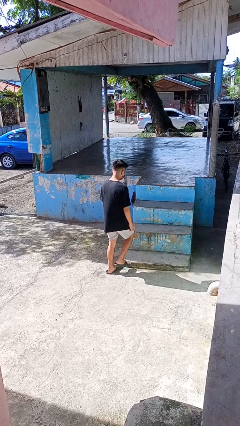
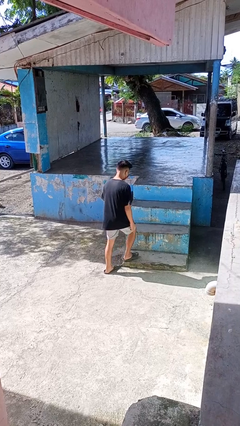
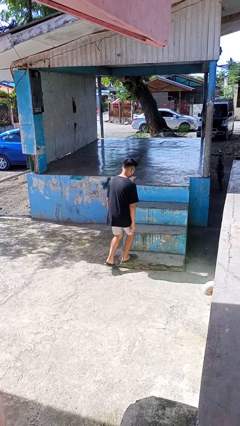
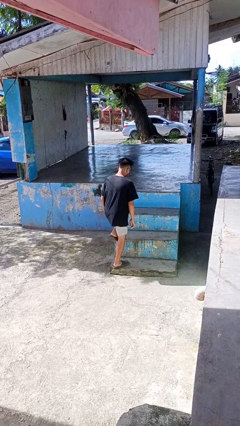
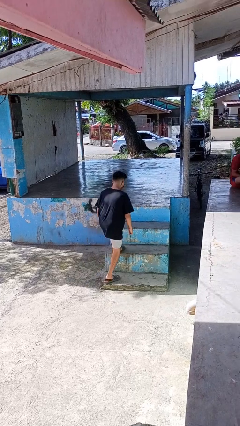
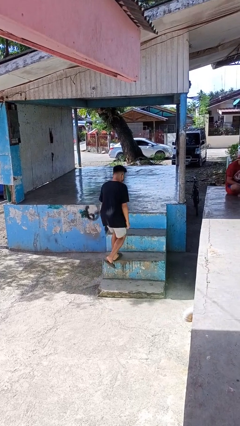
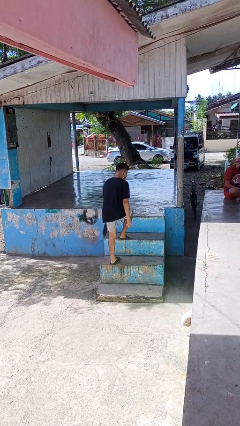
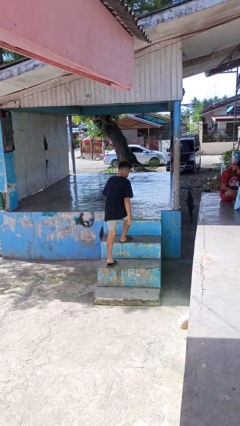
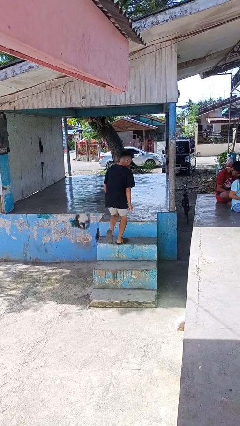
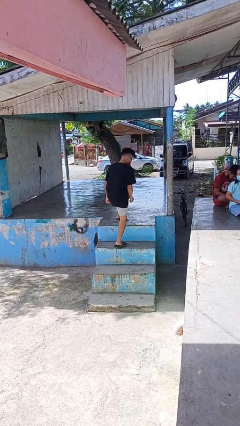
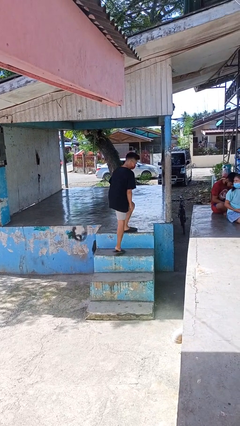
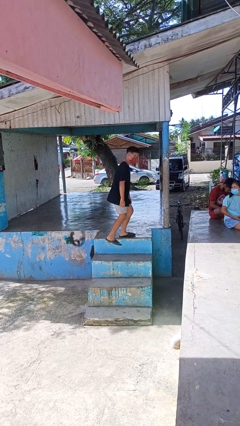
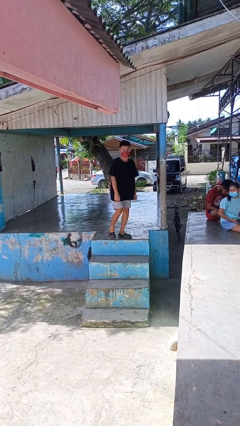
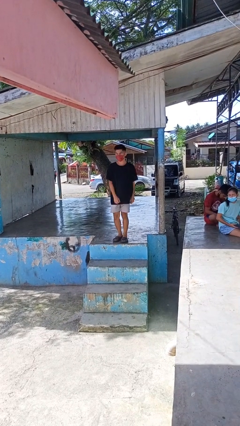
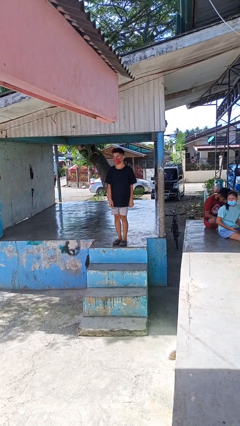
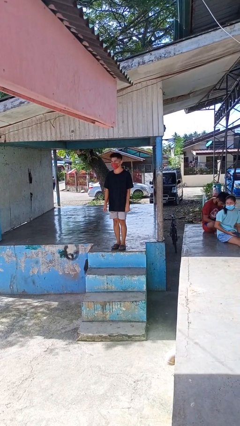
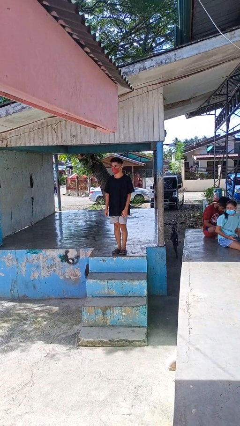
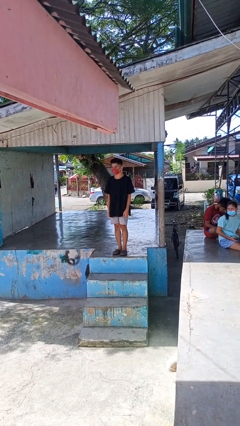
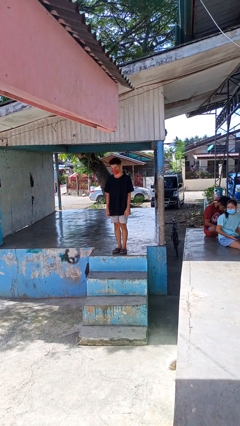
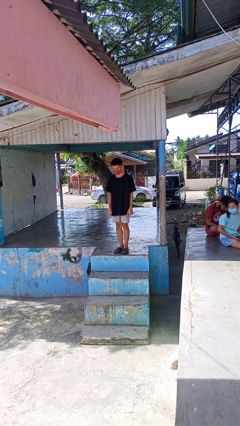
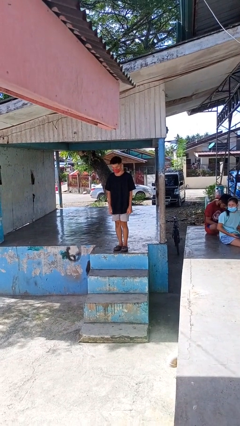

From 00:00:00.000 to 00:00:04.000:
person climbs up stairs

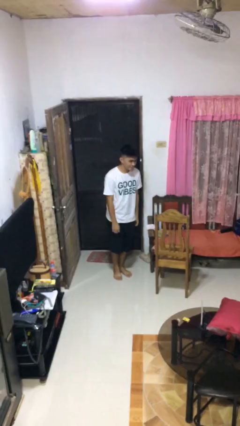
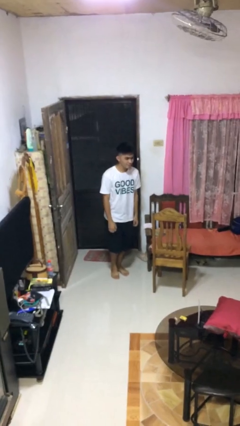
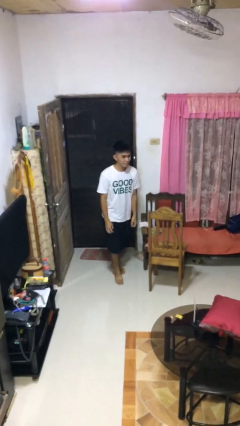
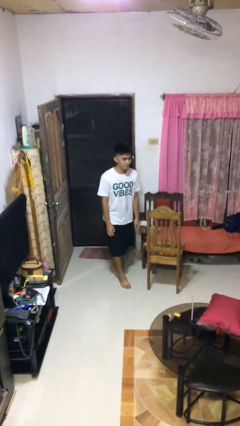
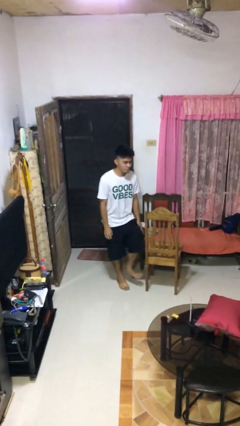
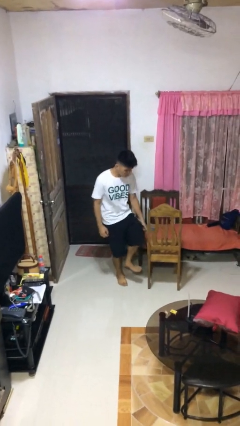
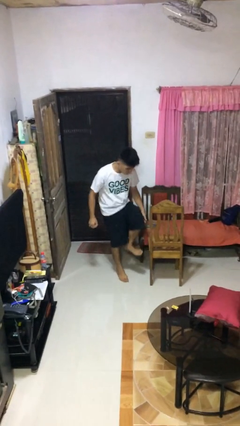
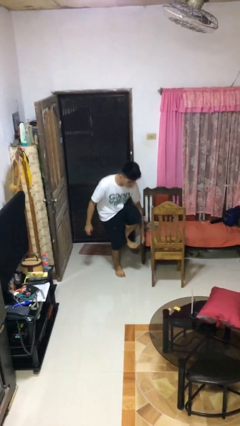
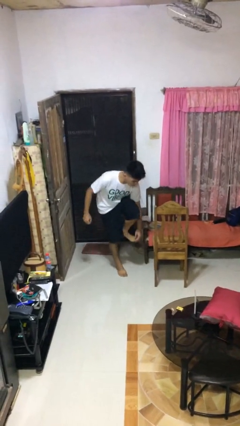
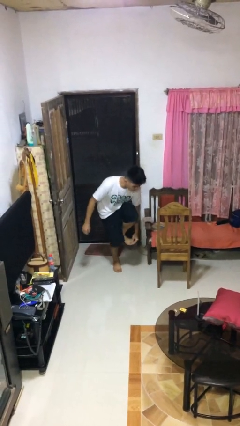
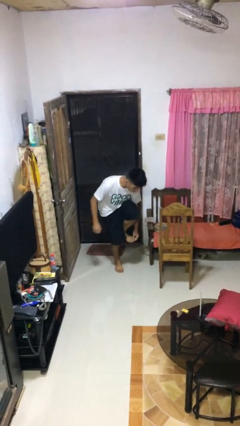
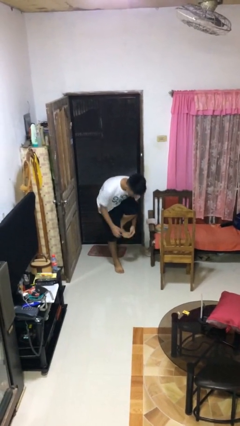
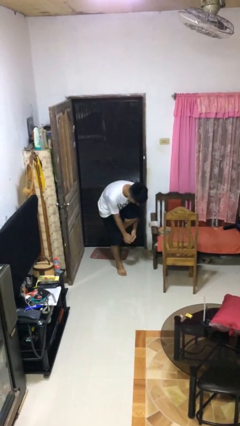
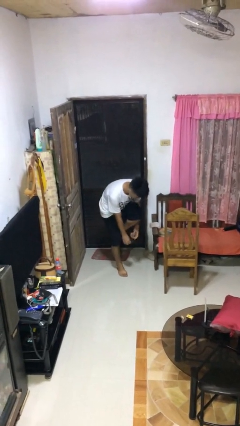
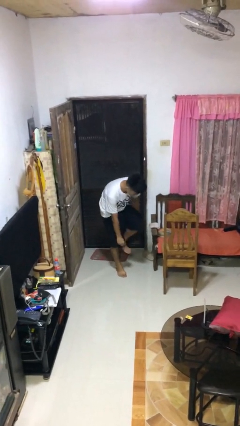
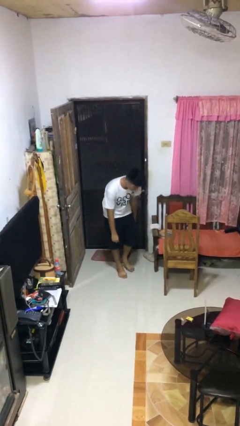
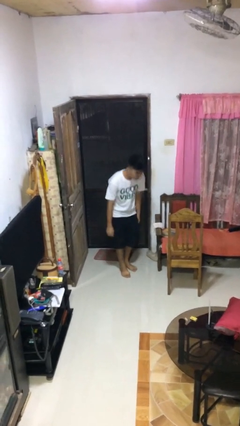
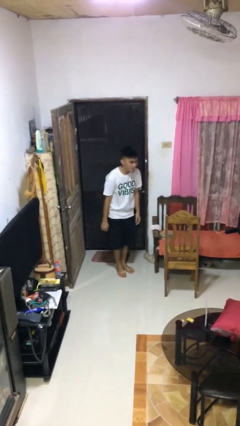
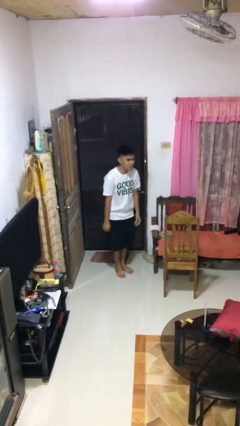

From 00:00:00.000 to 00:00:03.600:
person stubs toe

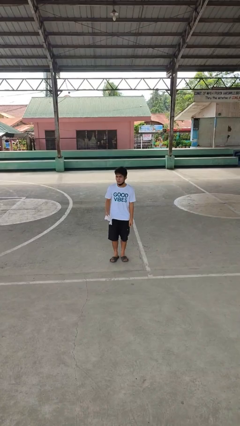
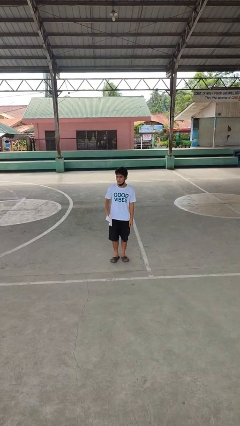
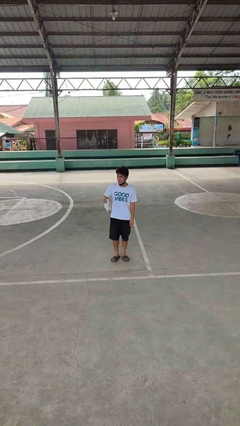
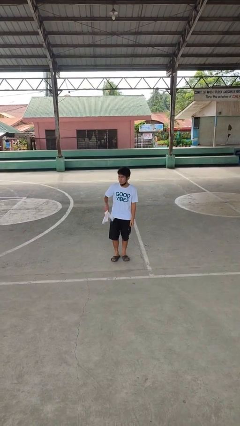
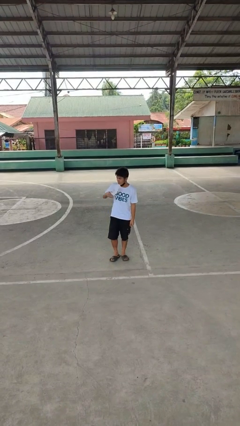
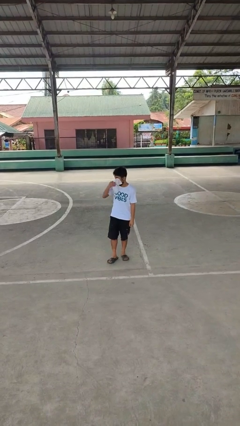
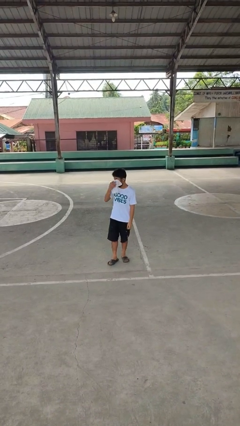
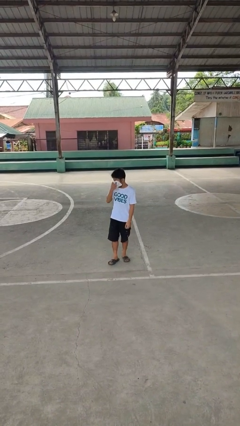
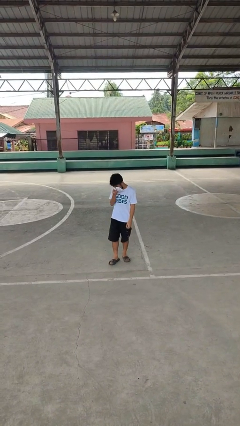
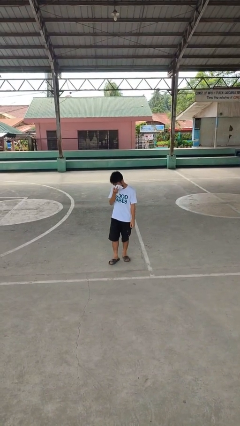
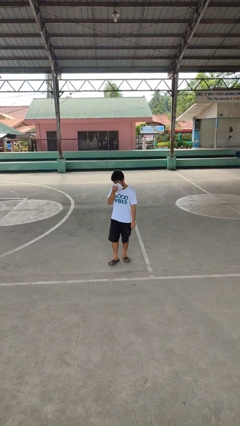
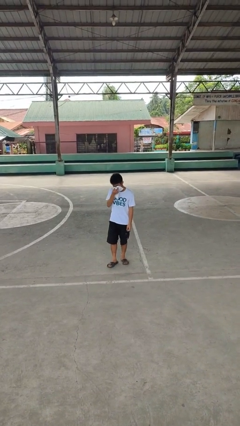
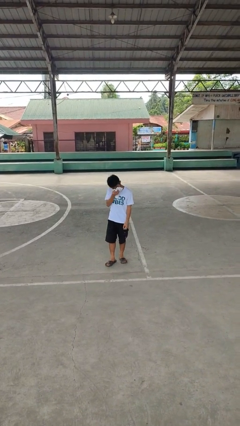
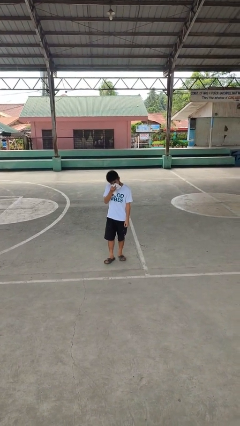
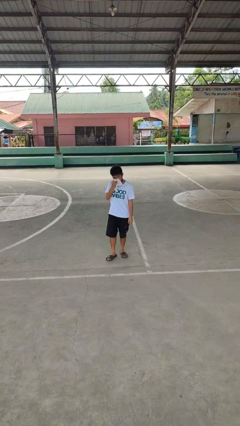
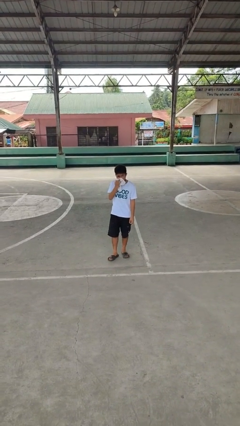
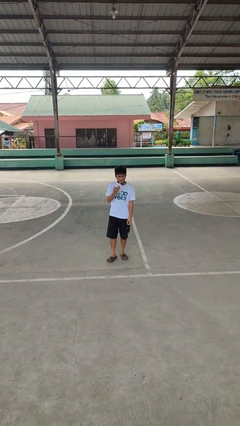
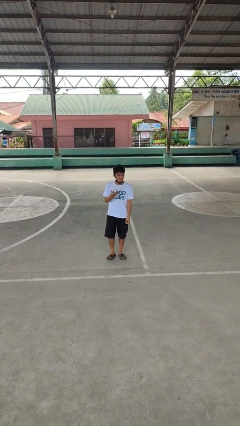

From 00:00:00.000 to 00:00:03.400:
person blows nose

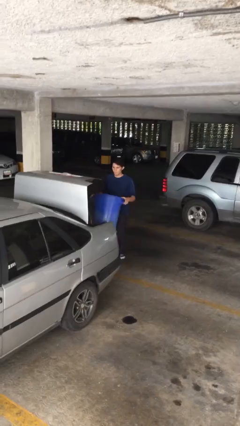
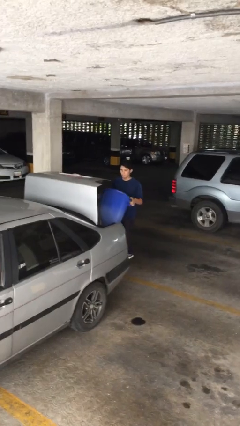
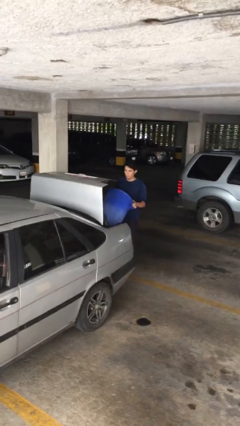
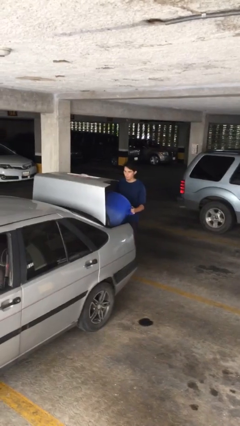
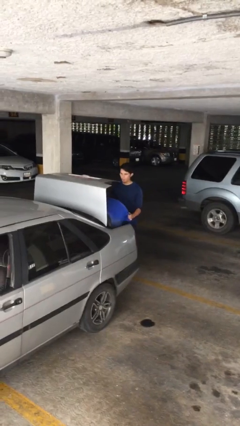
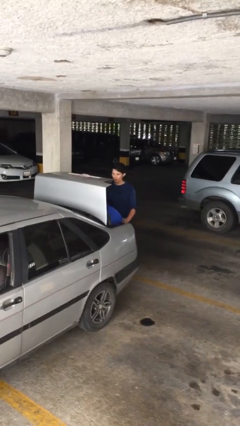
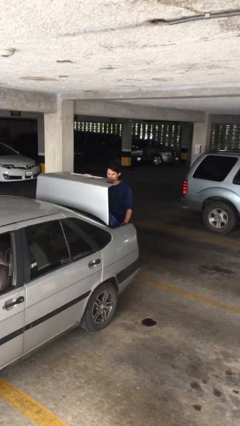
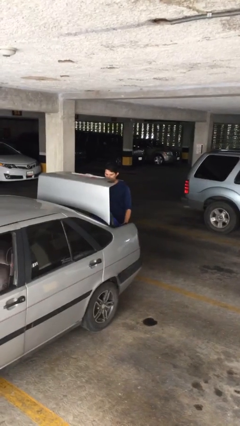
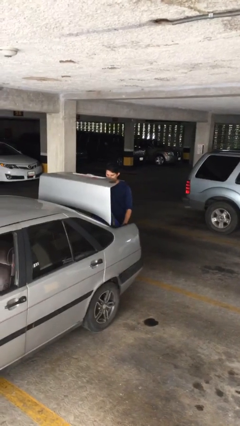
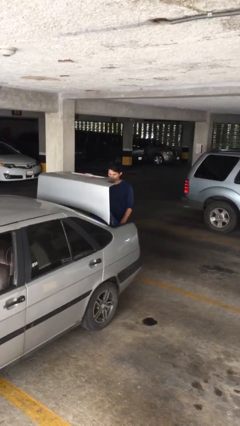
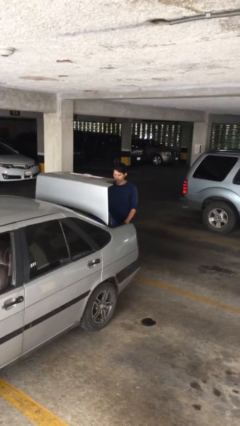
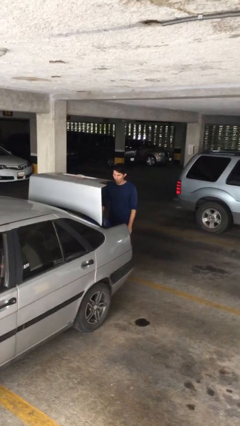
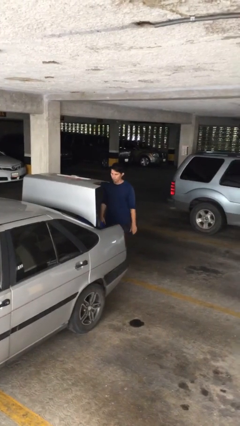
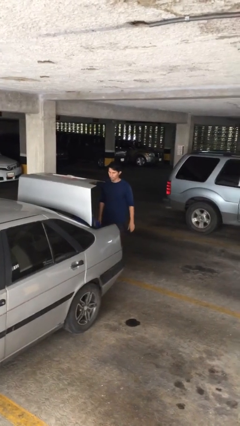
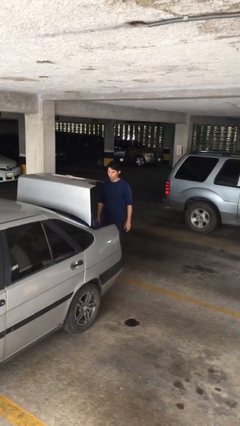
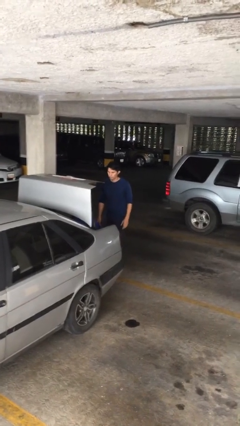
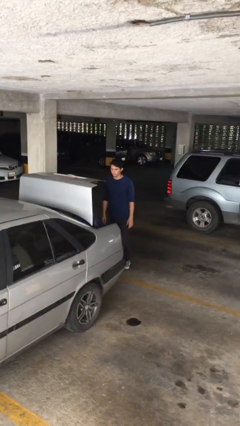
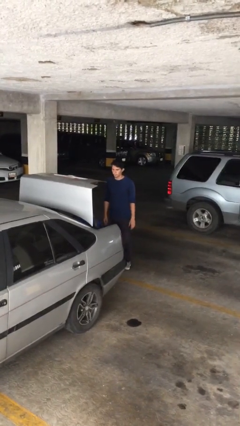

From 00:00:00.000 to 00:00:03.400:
person loads car

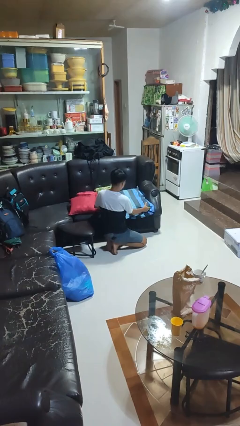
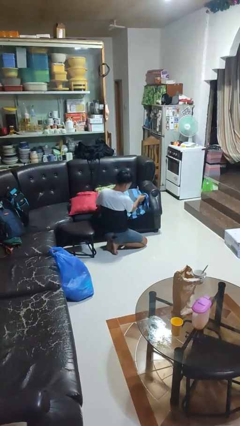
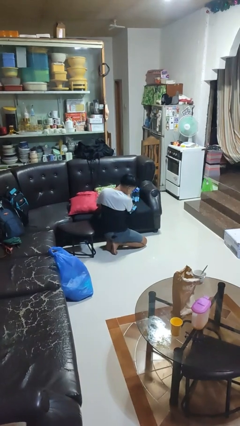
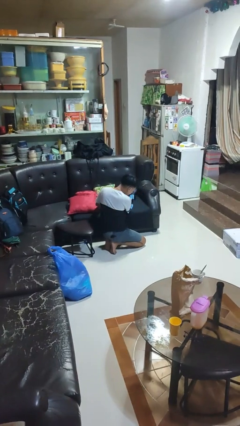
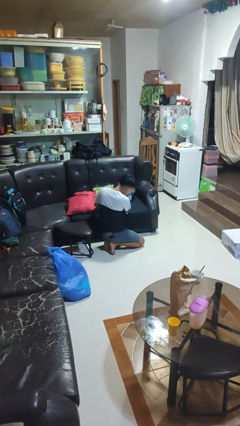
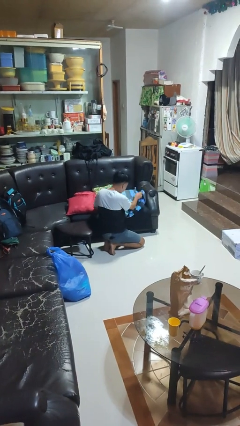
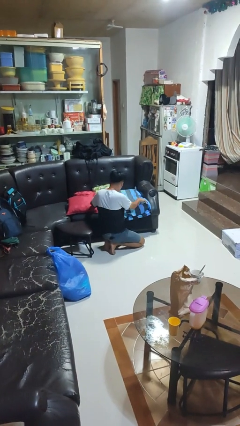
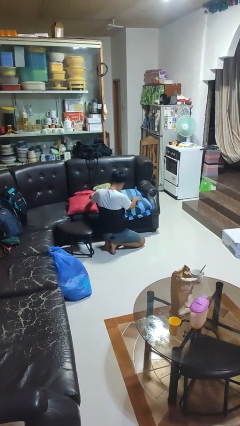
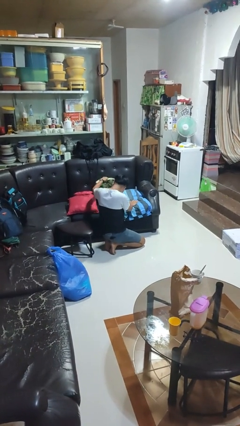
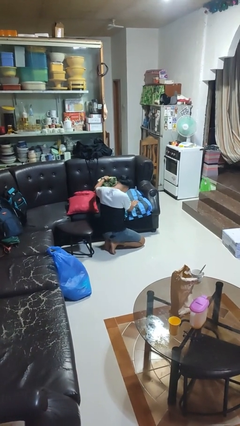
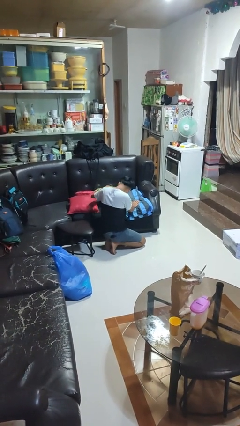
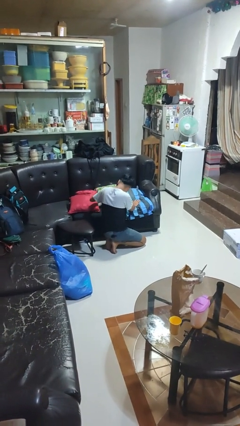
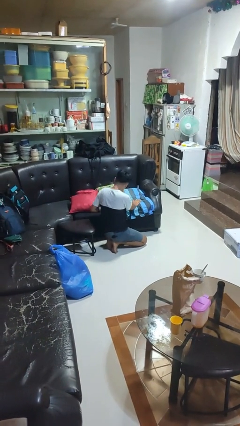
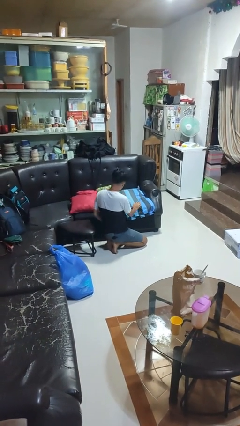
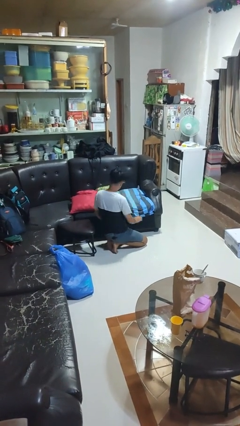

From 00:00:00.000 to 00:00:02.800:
person searches in couch
